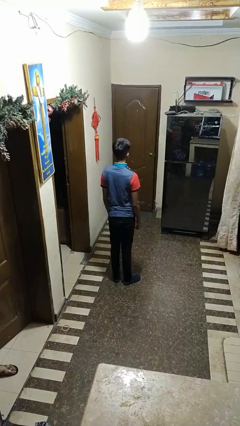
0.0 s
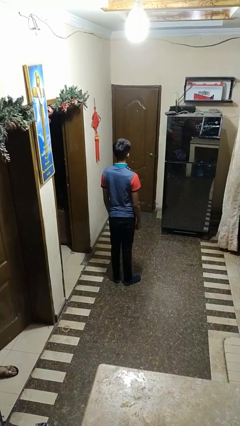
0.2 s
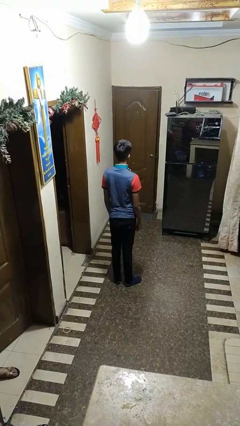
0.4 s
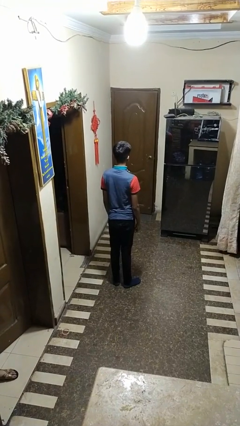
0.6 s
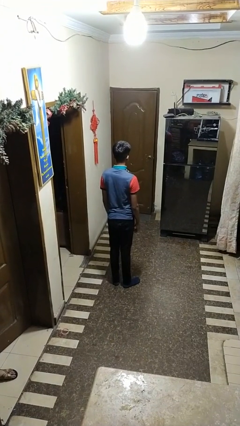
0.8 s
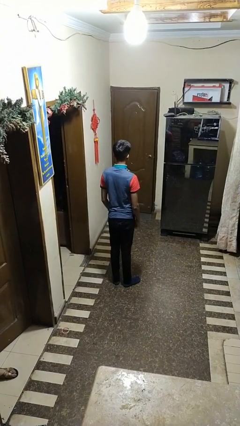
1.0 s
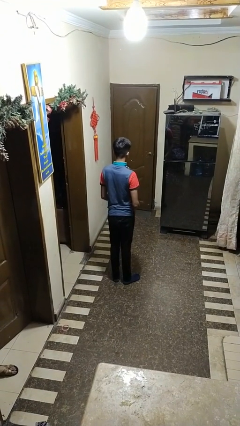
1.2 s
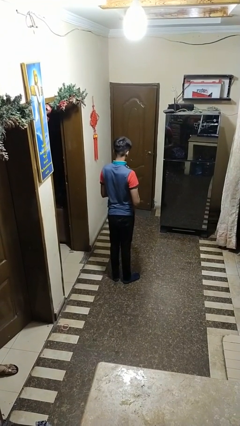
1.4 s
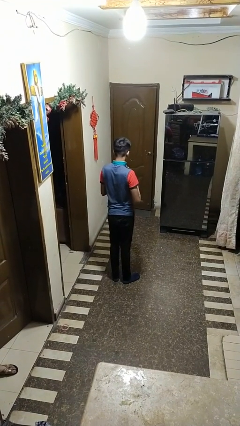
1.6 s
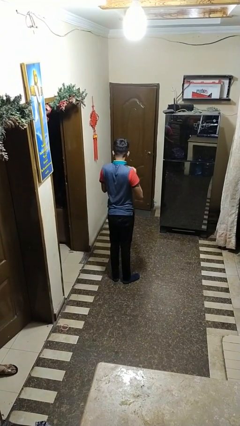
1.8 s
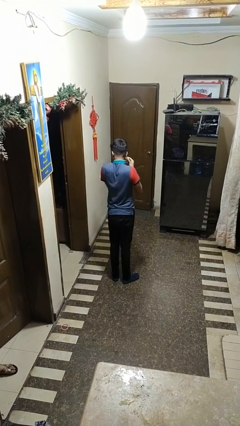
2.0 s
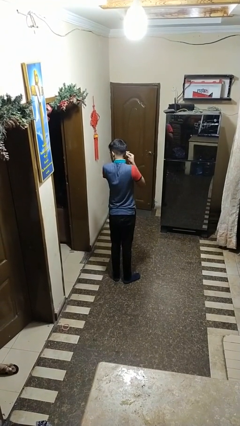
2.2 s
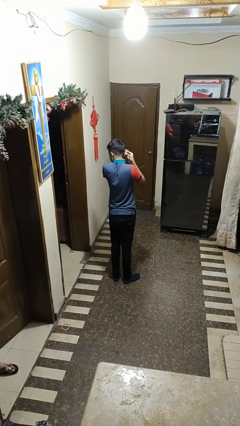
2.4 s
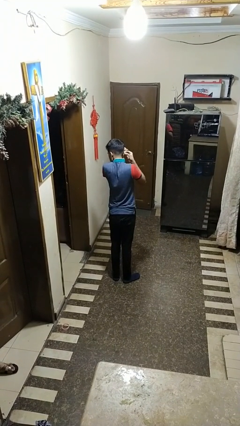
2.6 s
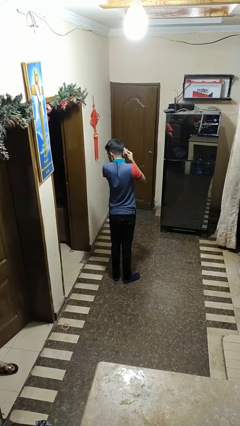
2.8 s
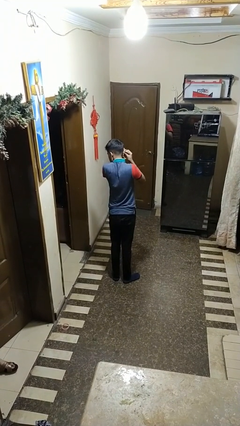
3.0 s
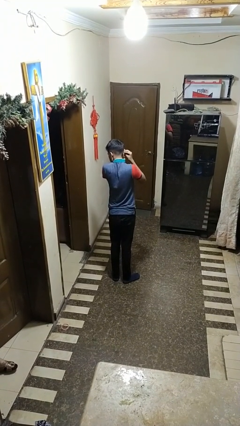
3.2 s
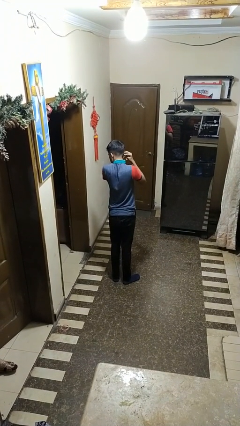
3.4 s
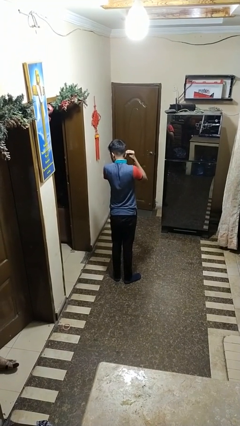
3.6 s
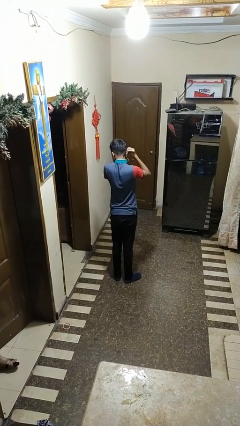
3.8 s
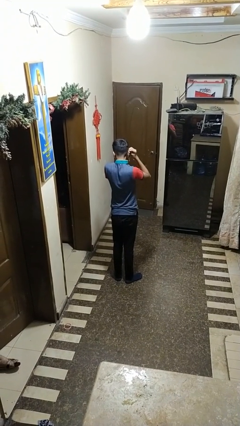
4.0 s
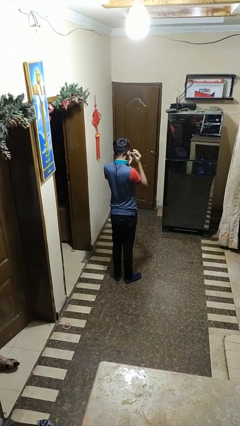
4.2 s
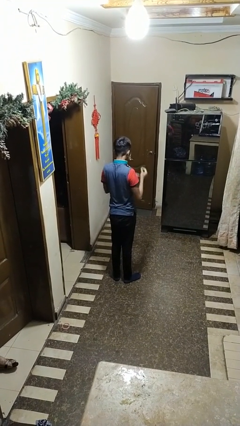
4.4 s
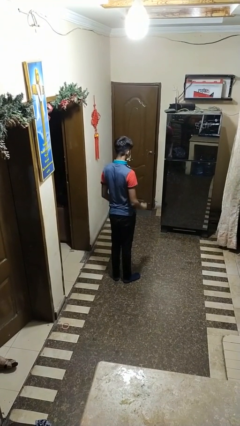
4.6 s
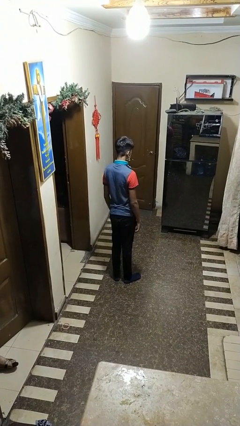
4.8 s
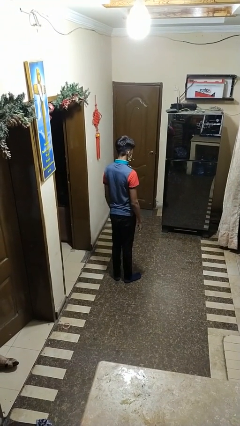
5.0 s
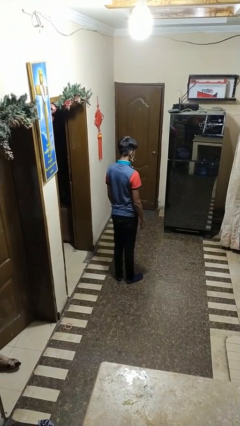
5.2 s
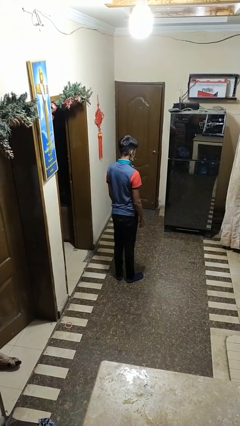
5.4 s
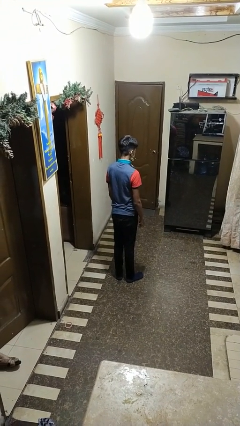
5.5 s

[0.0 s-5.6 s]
person puts on earrings

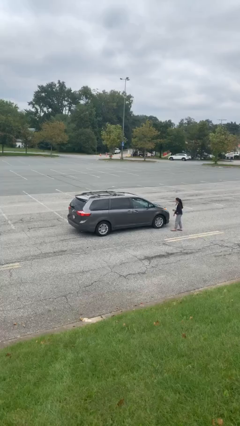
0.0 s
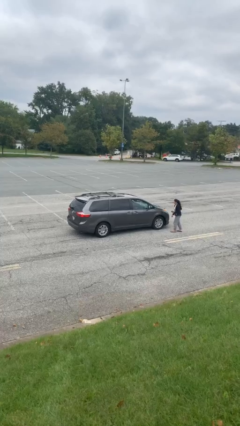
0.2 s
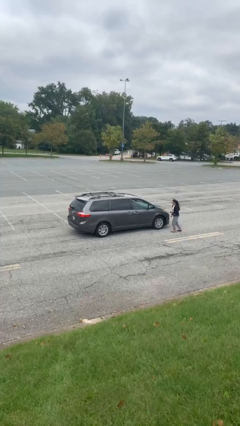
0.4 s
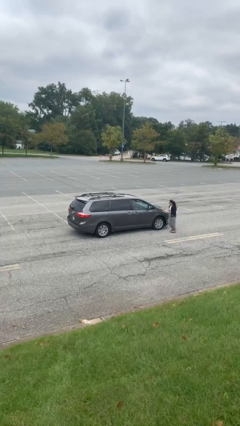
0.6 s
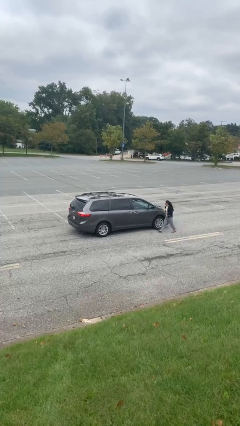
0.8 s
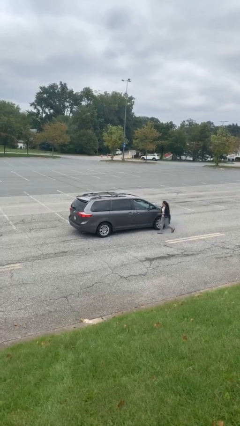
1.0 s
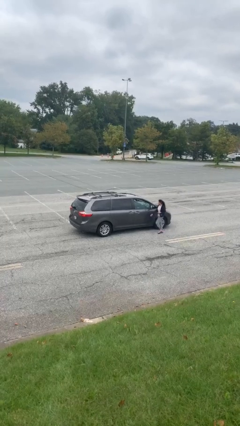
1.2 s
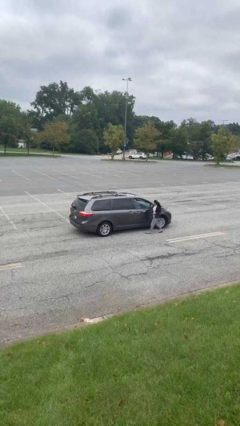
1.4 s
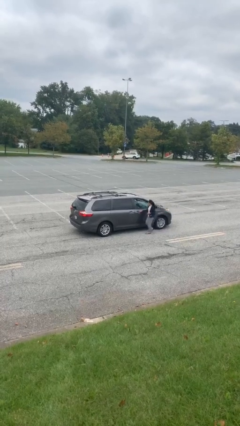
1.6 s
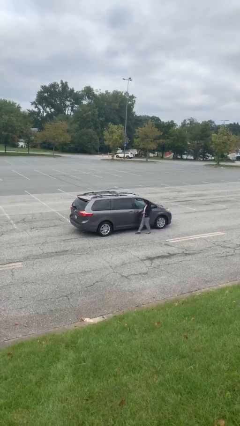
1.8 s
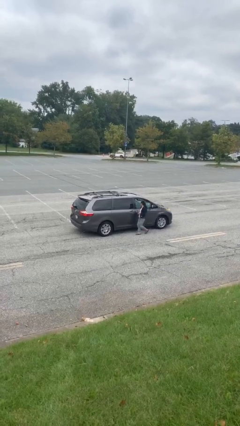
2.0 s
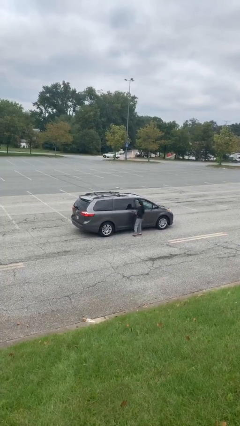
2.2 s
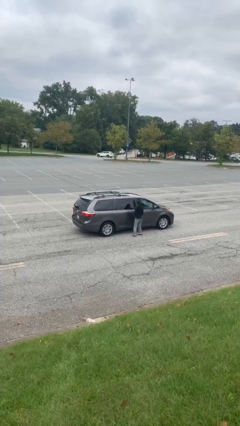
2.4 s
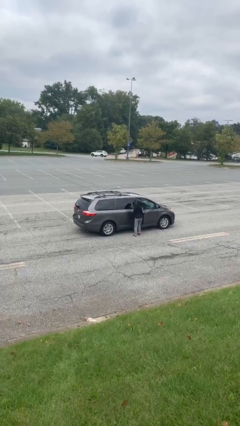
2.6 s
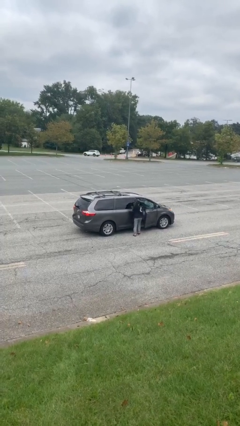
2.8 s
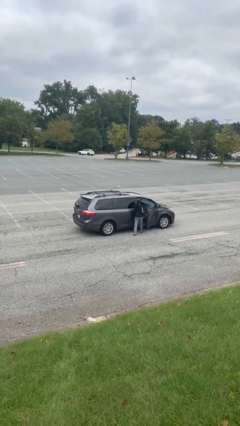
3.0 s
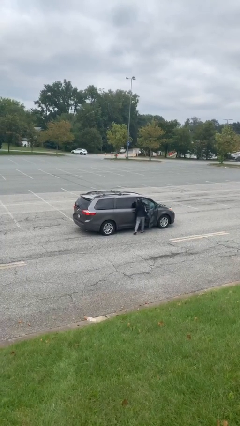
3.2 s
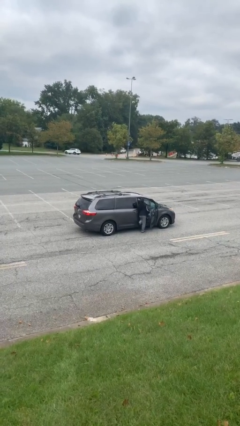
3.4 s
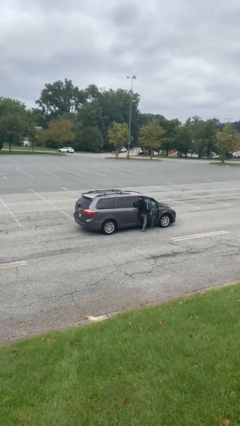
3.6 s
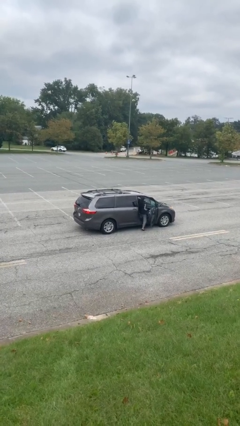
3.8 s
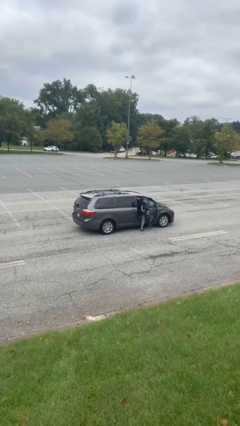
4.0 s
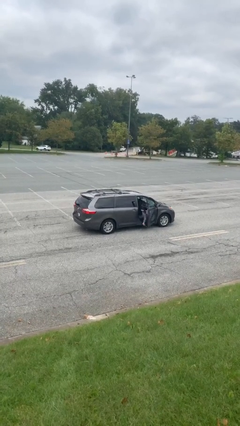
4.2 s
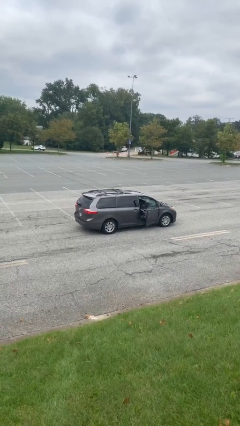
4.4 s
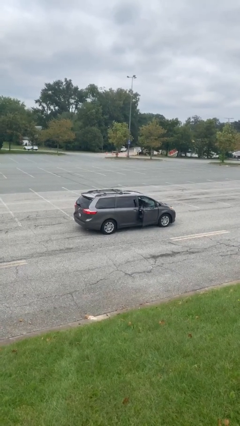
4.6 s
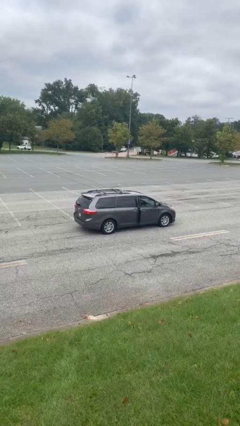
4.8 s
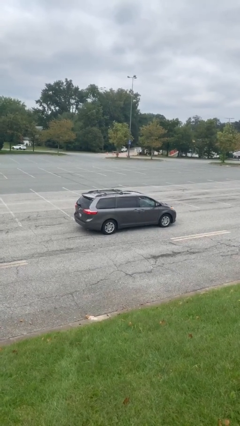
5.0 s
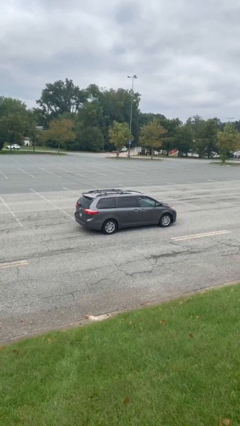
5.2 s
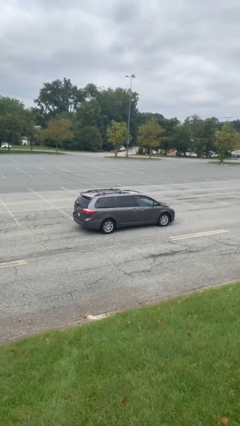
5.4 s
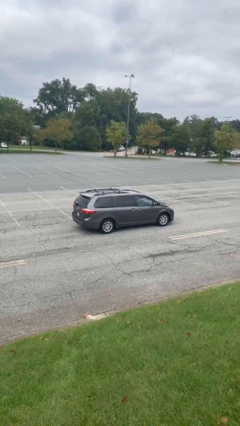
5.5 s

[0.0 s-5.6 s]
car picks up person

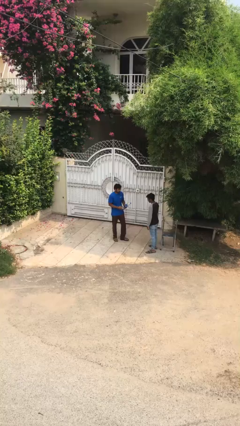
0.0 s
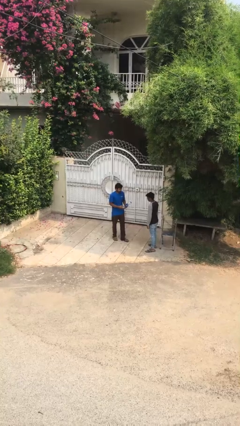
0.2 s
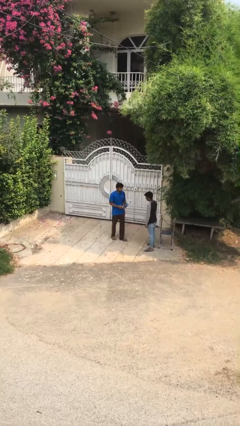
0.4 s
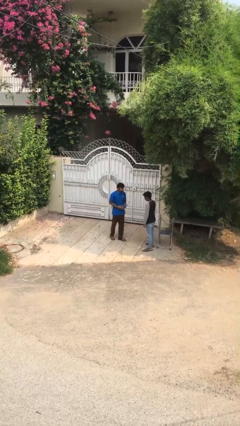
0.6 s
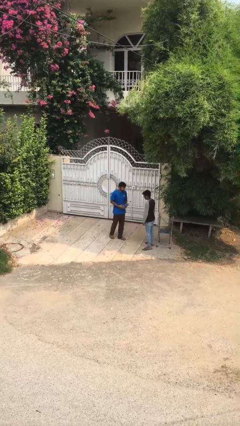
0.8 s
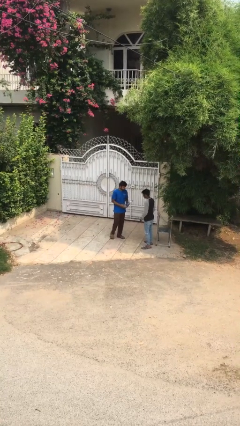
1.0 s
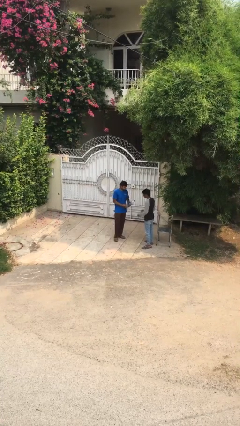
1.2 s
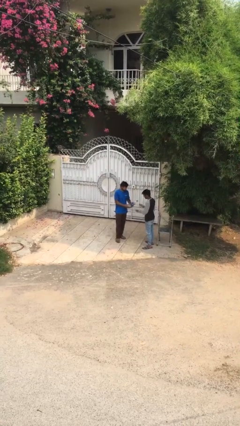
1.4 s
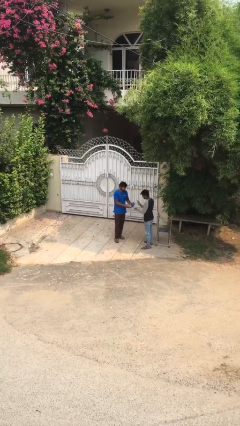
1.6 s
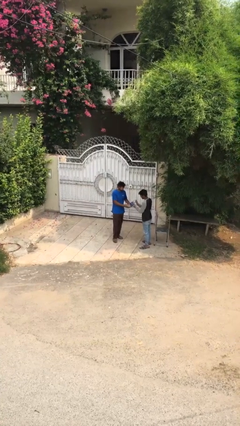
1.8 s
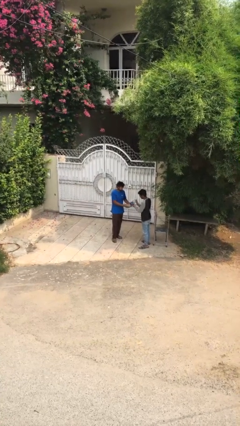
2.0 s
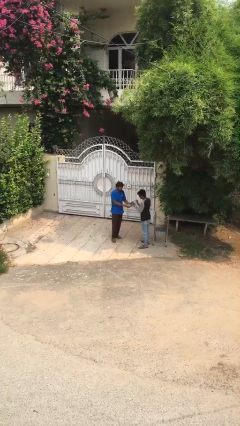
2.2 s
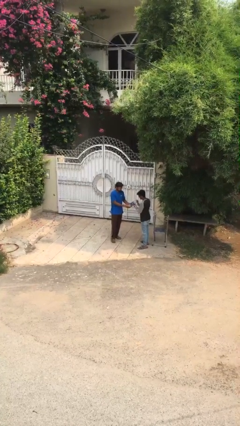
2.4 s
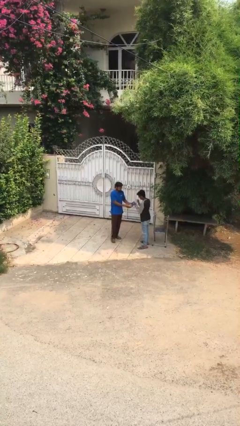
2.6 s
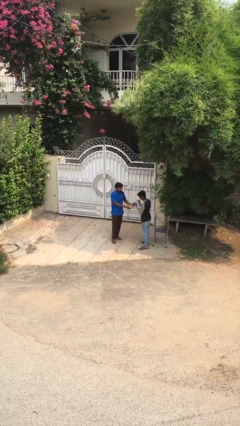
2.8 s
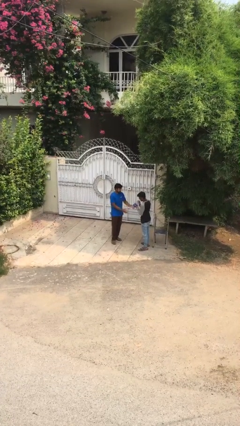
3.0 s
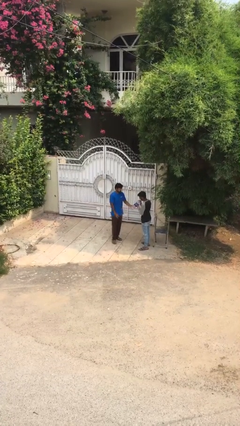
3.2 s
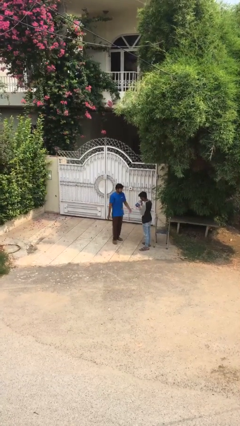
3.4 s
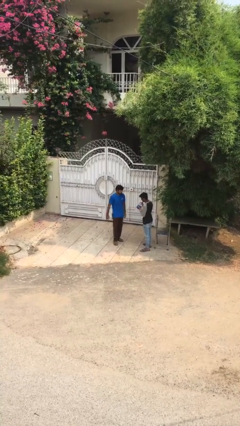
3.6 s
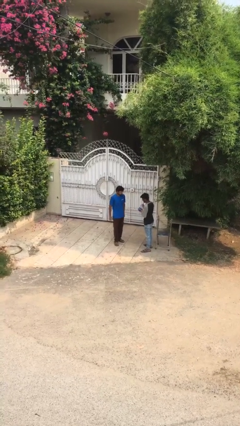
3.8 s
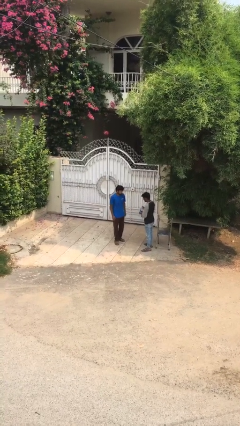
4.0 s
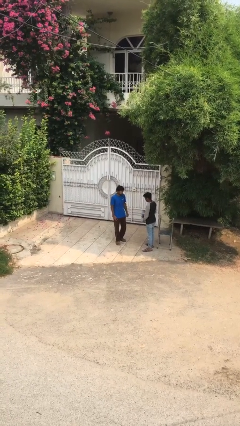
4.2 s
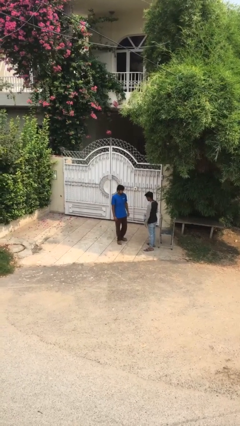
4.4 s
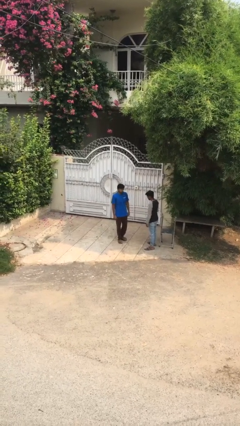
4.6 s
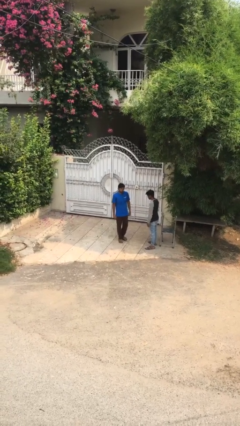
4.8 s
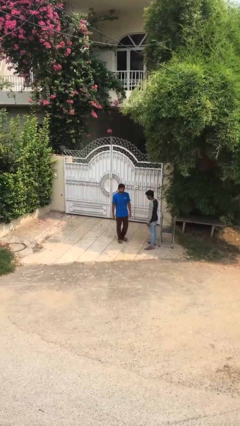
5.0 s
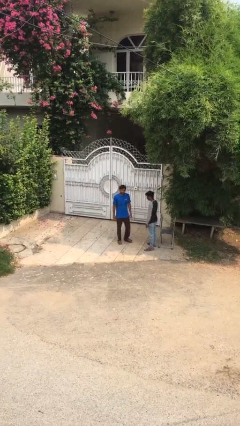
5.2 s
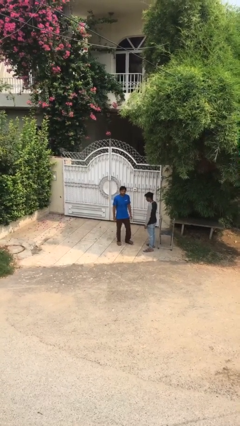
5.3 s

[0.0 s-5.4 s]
person transfers object to person

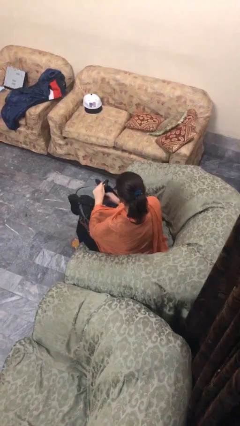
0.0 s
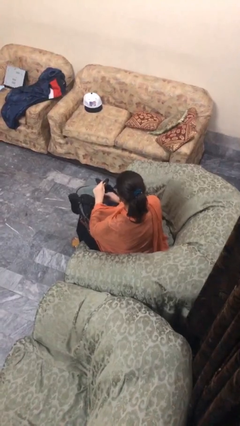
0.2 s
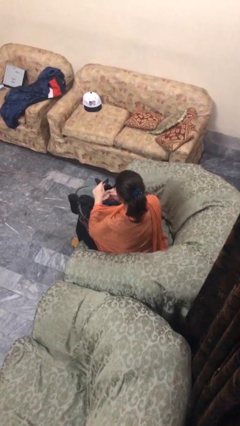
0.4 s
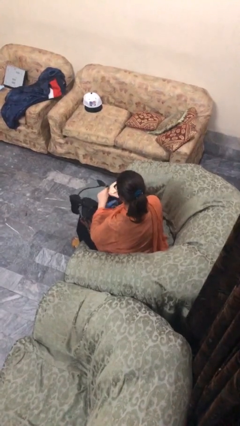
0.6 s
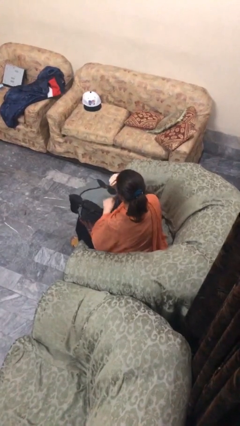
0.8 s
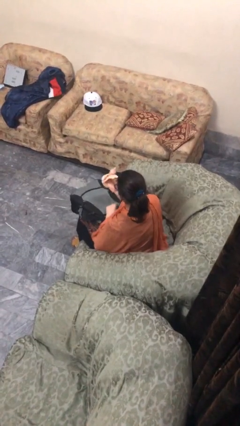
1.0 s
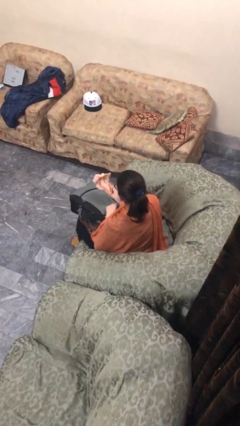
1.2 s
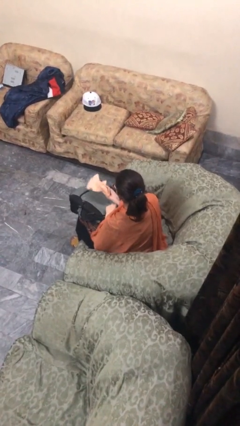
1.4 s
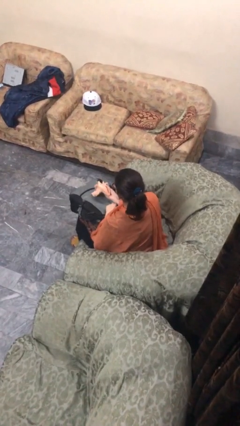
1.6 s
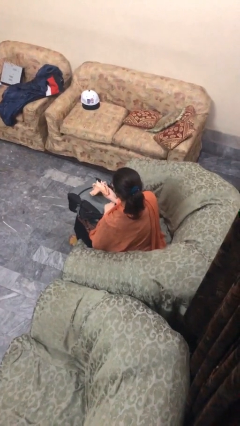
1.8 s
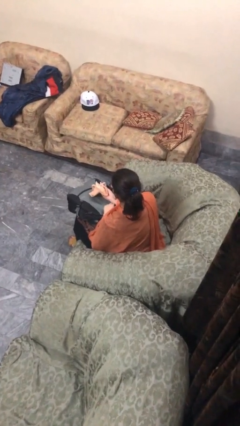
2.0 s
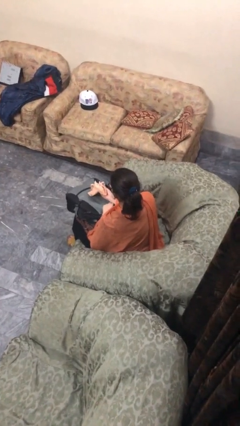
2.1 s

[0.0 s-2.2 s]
person takes object from backpack
